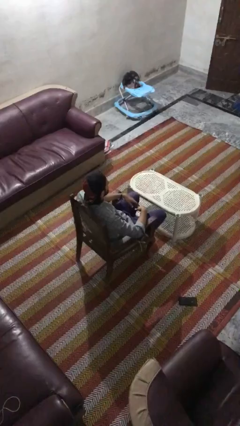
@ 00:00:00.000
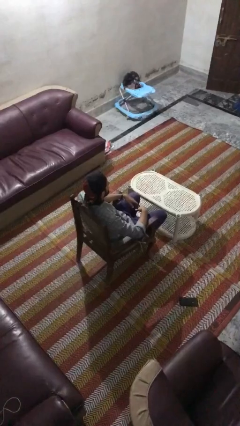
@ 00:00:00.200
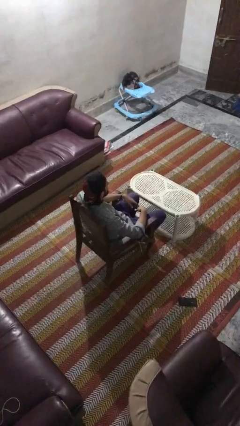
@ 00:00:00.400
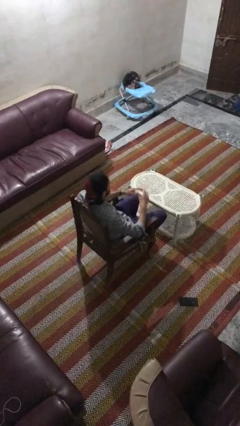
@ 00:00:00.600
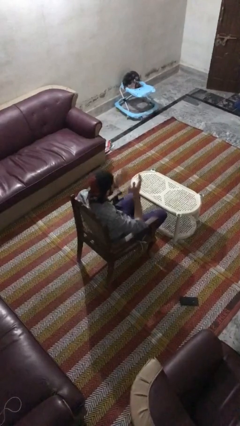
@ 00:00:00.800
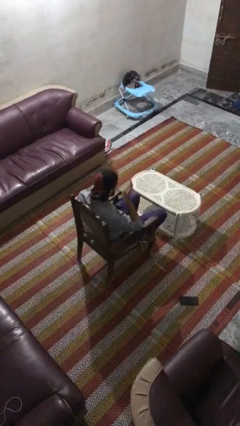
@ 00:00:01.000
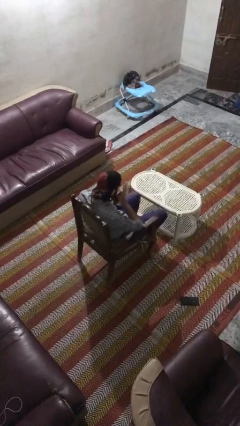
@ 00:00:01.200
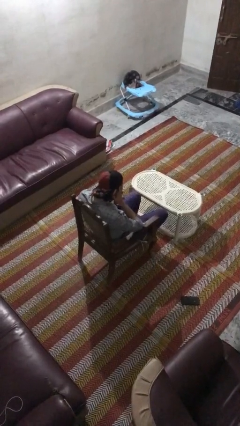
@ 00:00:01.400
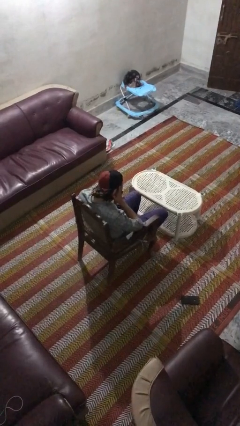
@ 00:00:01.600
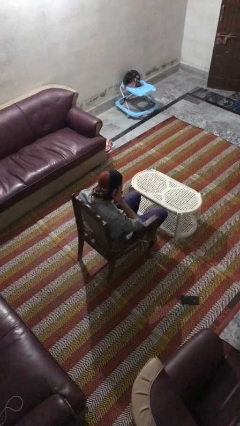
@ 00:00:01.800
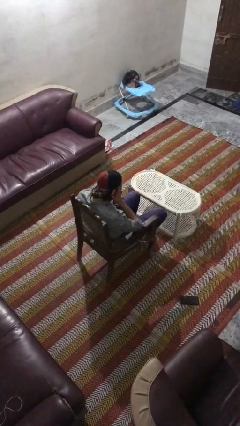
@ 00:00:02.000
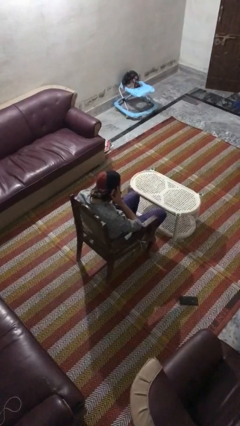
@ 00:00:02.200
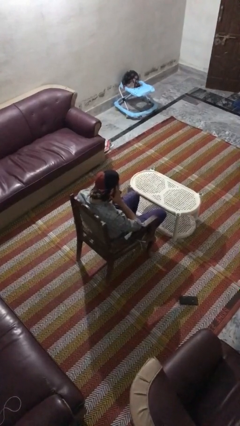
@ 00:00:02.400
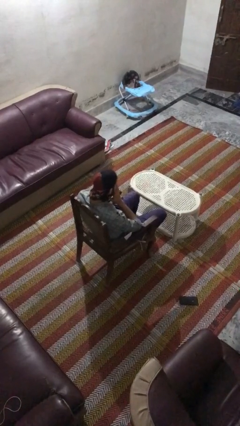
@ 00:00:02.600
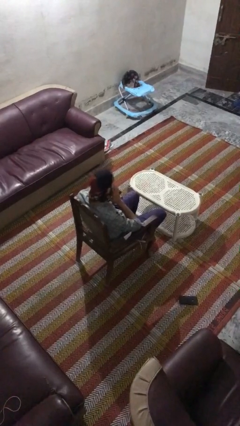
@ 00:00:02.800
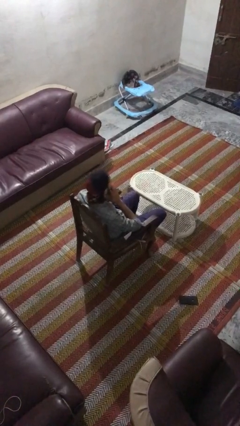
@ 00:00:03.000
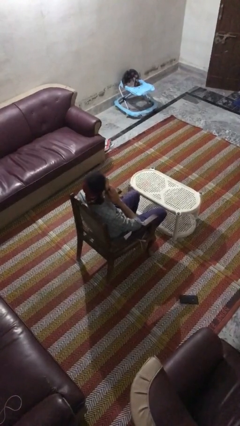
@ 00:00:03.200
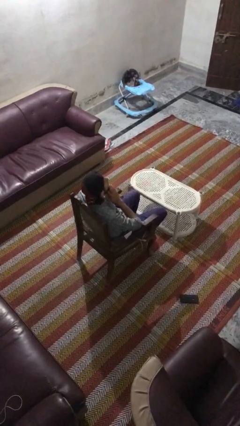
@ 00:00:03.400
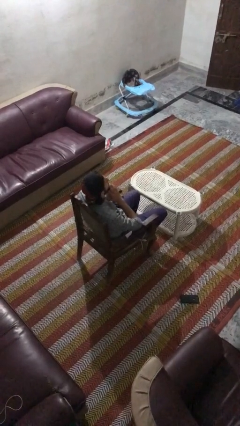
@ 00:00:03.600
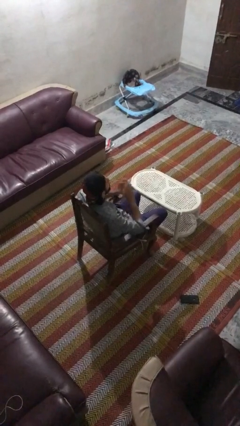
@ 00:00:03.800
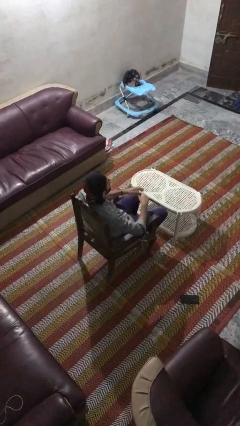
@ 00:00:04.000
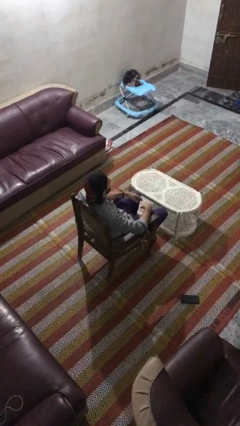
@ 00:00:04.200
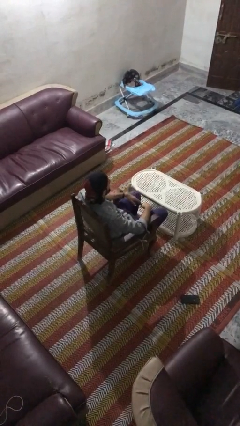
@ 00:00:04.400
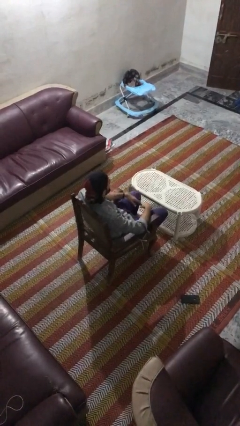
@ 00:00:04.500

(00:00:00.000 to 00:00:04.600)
person covers face with hands

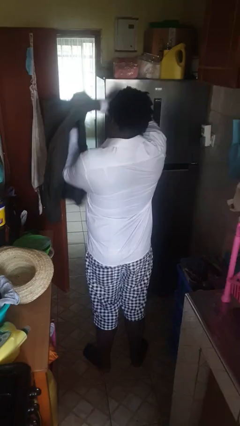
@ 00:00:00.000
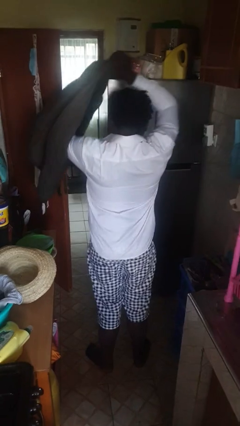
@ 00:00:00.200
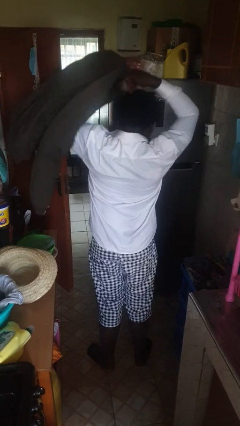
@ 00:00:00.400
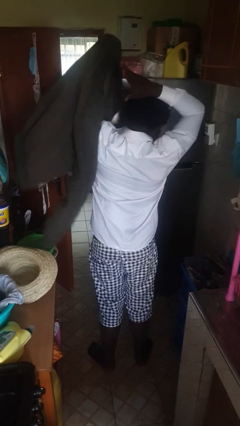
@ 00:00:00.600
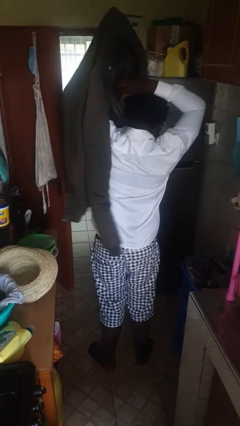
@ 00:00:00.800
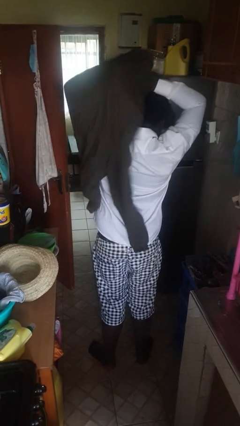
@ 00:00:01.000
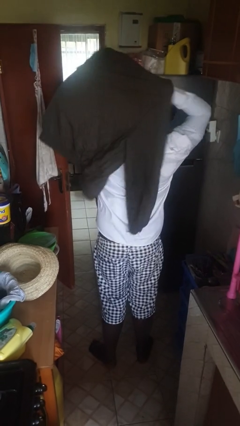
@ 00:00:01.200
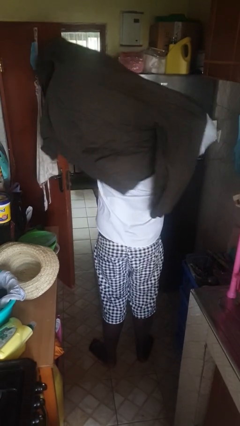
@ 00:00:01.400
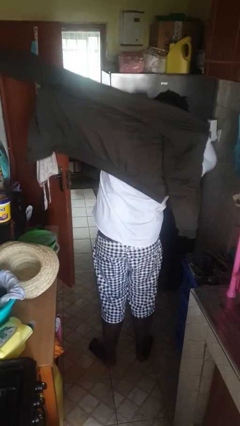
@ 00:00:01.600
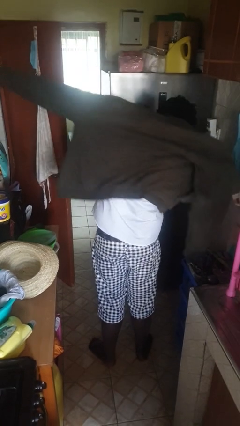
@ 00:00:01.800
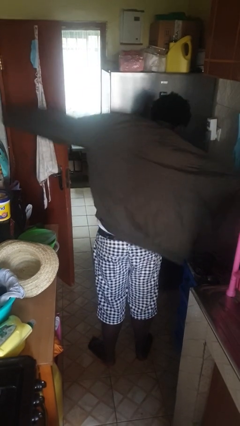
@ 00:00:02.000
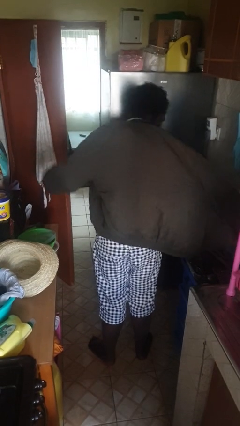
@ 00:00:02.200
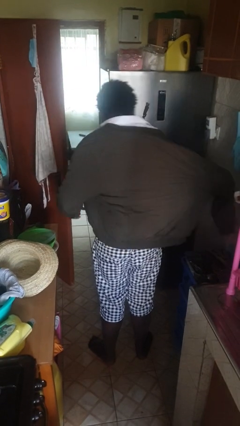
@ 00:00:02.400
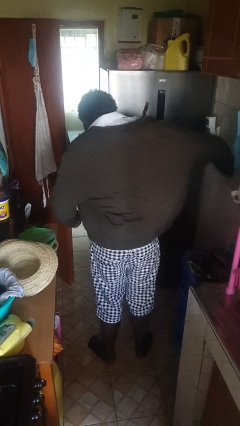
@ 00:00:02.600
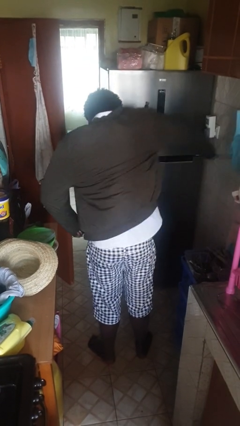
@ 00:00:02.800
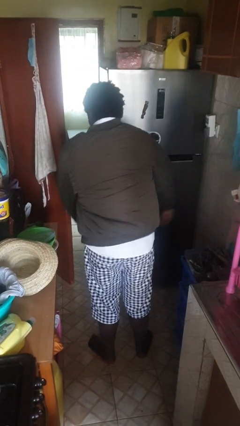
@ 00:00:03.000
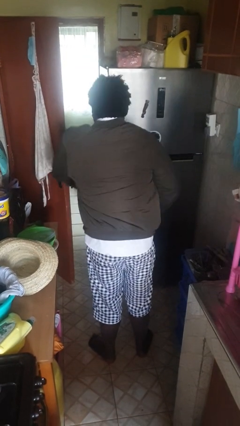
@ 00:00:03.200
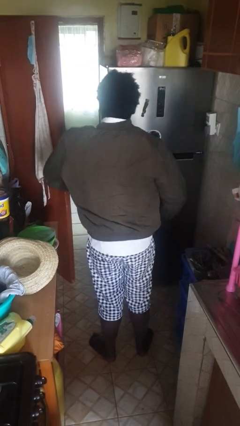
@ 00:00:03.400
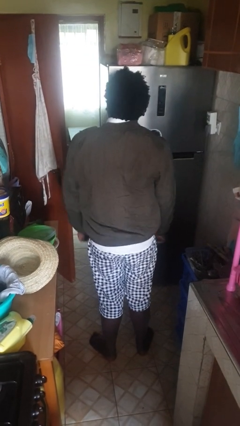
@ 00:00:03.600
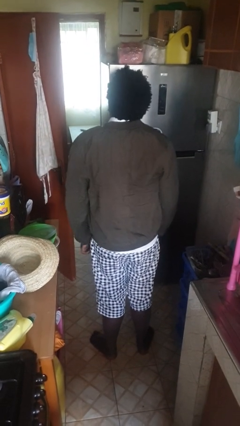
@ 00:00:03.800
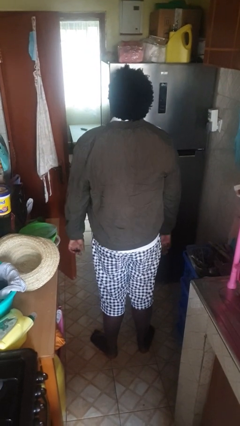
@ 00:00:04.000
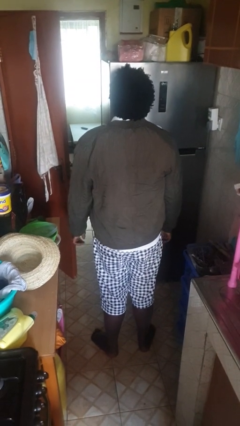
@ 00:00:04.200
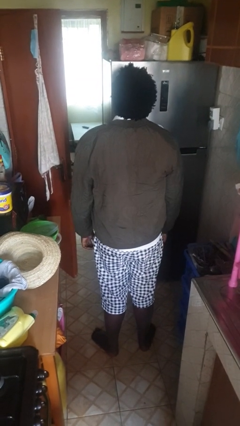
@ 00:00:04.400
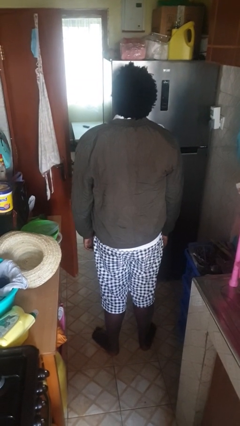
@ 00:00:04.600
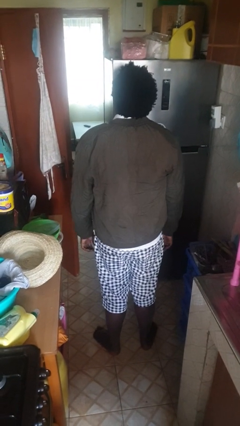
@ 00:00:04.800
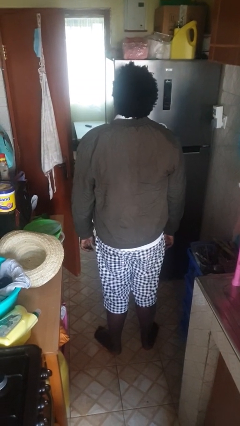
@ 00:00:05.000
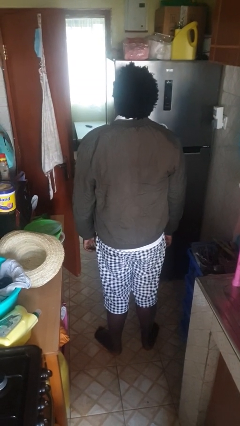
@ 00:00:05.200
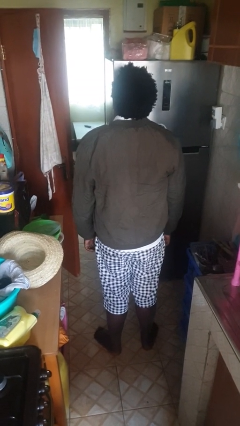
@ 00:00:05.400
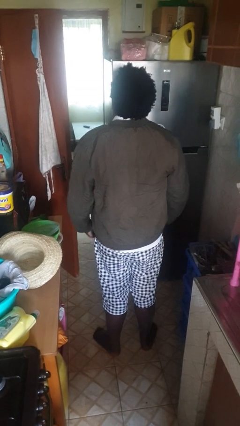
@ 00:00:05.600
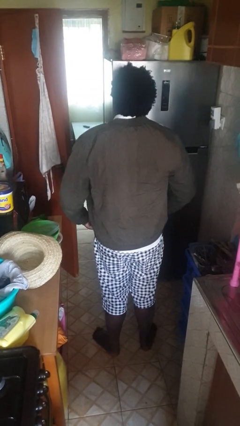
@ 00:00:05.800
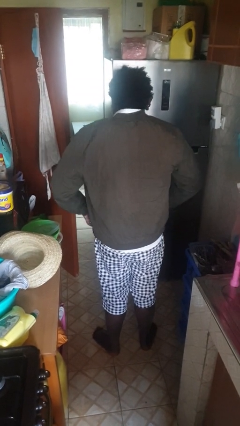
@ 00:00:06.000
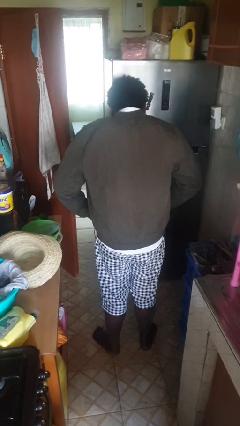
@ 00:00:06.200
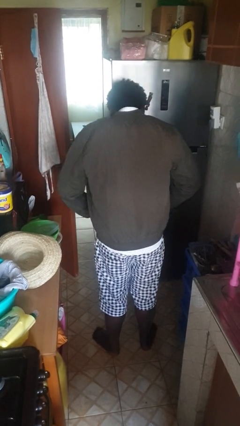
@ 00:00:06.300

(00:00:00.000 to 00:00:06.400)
person puts on jacket

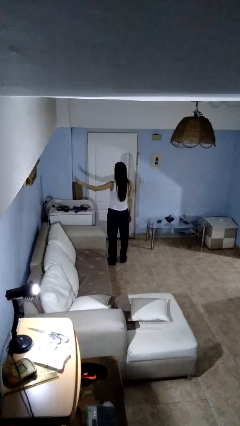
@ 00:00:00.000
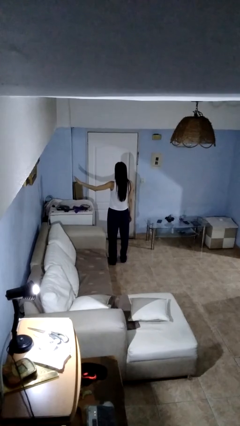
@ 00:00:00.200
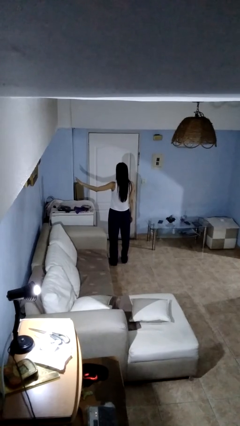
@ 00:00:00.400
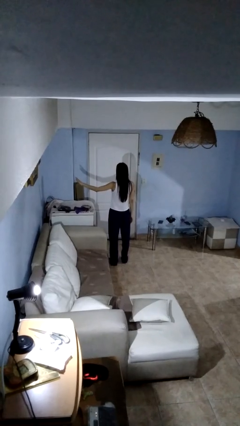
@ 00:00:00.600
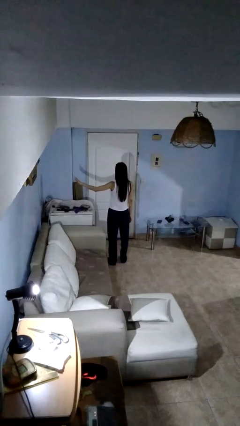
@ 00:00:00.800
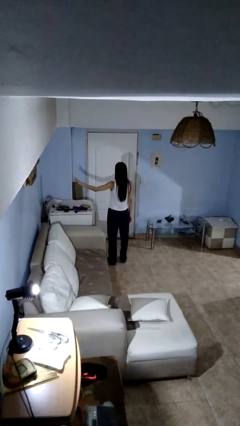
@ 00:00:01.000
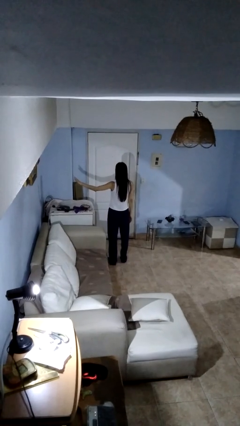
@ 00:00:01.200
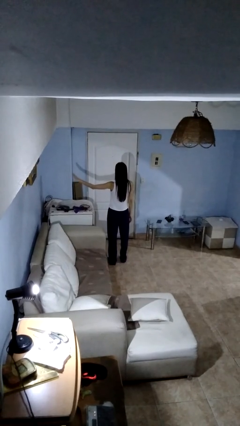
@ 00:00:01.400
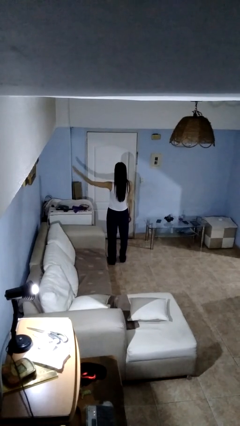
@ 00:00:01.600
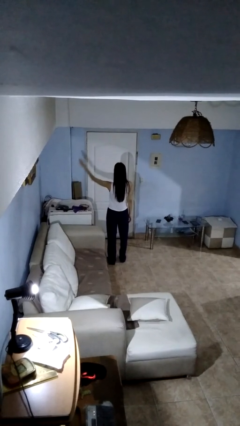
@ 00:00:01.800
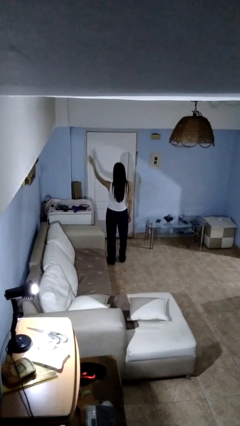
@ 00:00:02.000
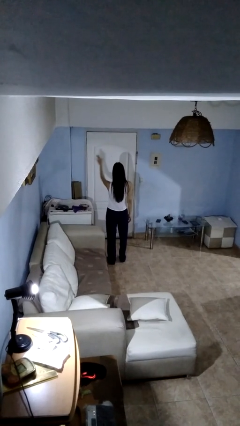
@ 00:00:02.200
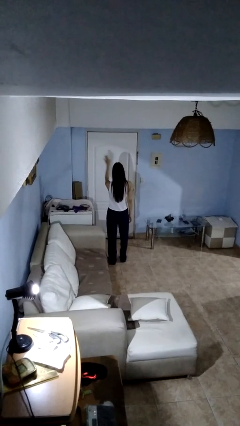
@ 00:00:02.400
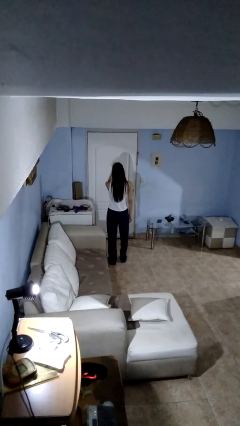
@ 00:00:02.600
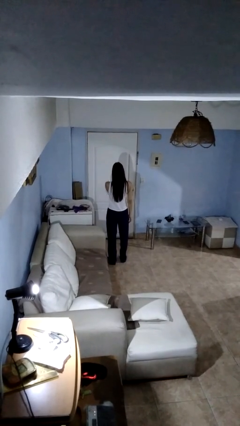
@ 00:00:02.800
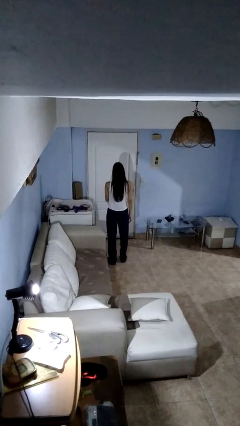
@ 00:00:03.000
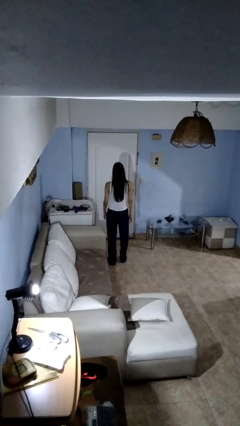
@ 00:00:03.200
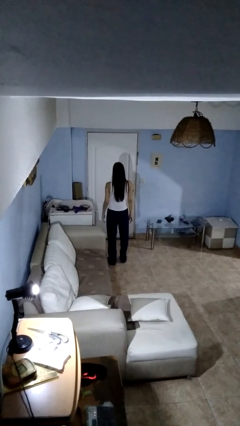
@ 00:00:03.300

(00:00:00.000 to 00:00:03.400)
person gestures swipe right

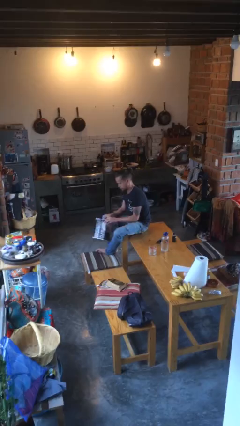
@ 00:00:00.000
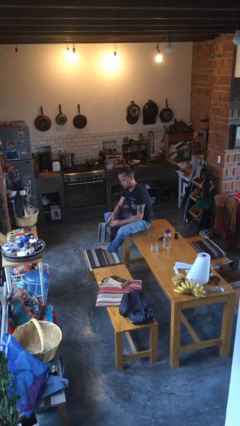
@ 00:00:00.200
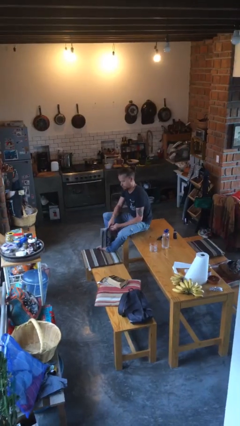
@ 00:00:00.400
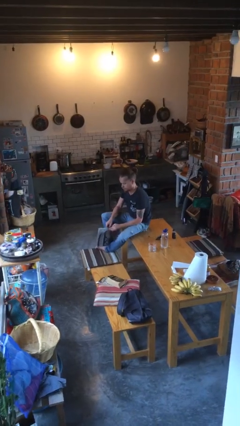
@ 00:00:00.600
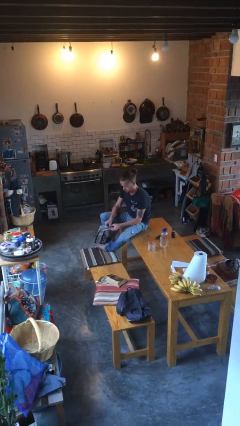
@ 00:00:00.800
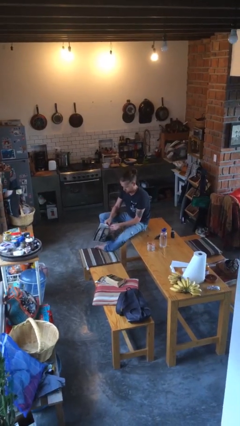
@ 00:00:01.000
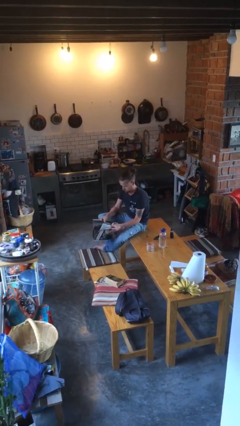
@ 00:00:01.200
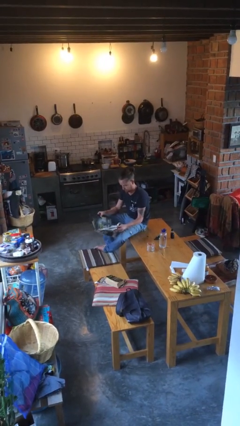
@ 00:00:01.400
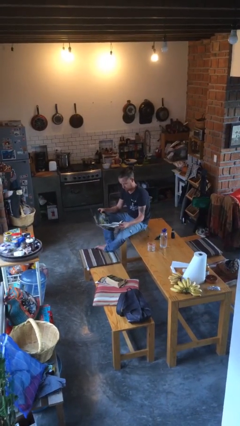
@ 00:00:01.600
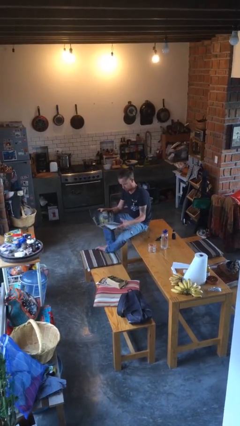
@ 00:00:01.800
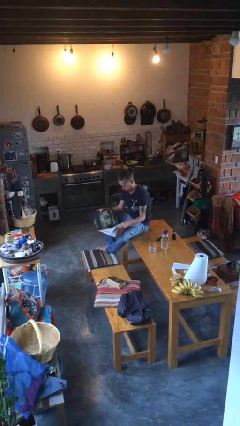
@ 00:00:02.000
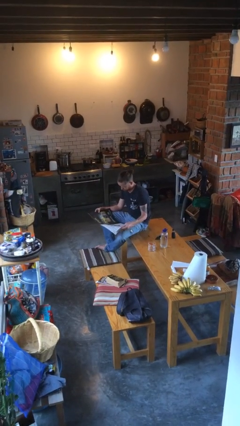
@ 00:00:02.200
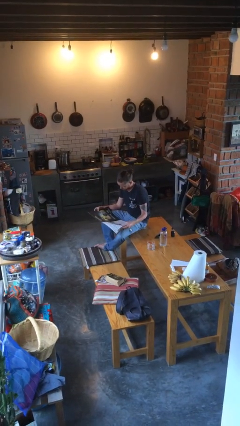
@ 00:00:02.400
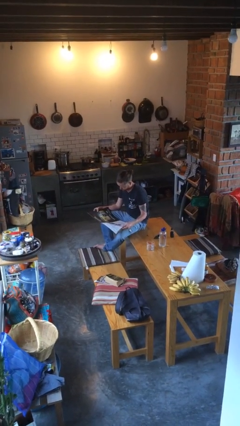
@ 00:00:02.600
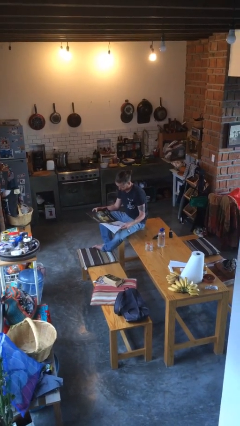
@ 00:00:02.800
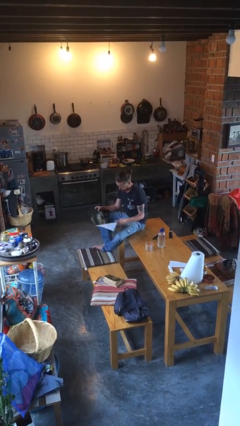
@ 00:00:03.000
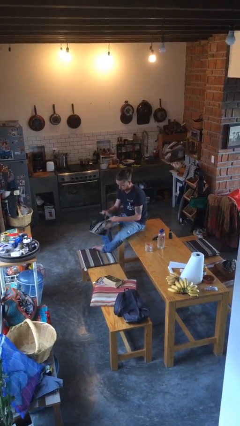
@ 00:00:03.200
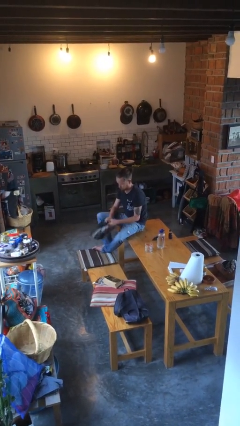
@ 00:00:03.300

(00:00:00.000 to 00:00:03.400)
person reads newspaper
